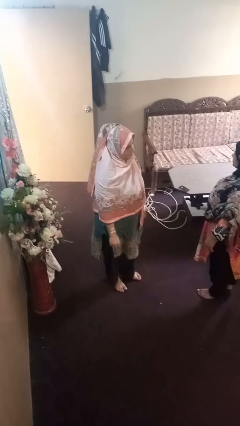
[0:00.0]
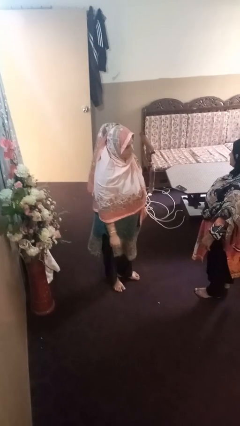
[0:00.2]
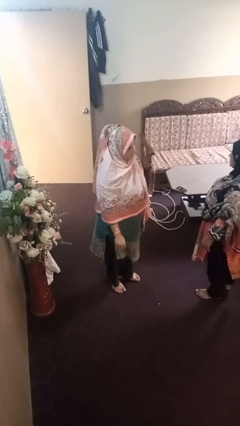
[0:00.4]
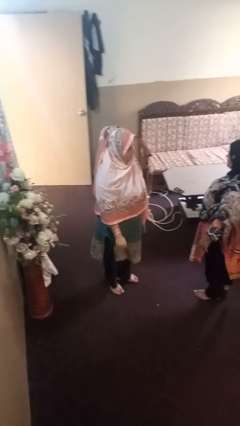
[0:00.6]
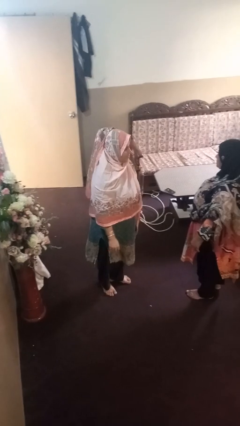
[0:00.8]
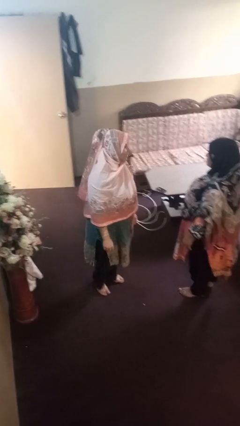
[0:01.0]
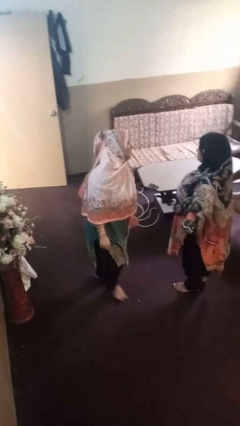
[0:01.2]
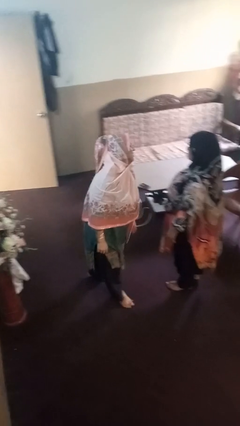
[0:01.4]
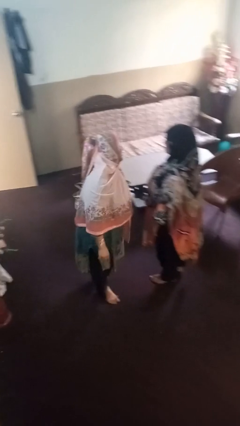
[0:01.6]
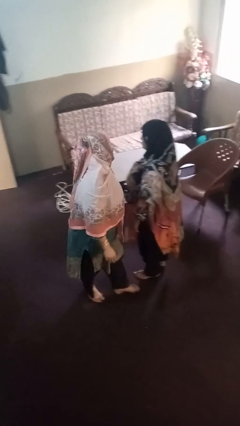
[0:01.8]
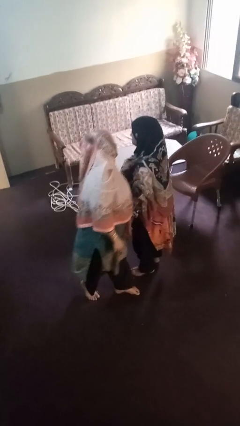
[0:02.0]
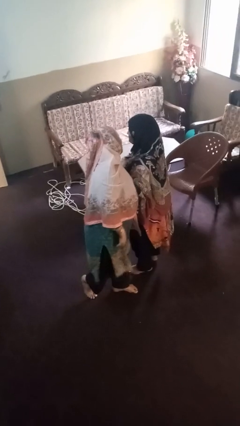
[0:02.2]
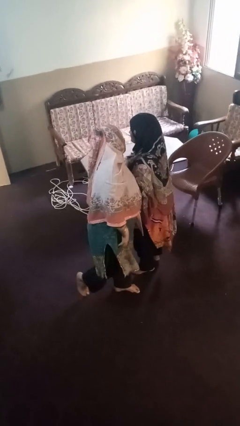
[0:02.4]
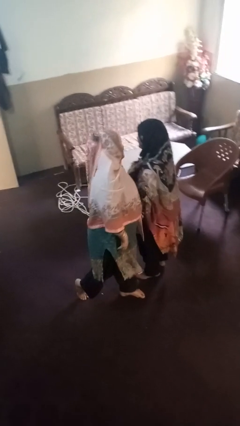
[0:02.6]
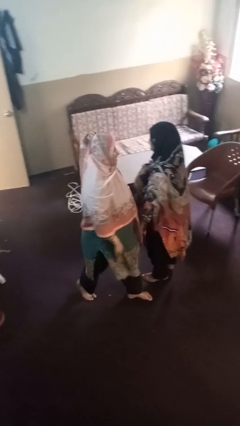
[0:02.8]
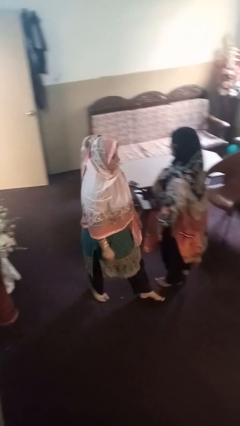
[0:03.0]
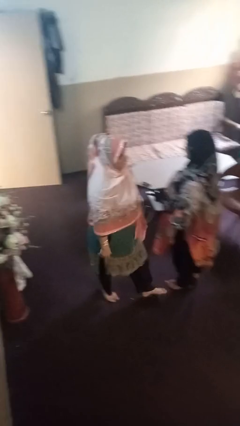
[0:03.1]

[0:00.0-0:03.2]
person laughs with person

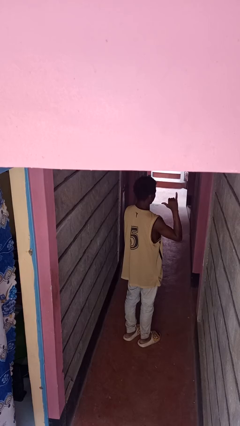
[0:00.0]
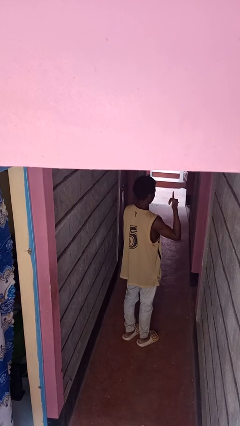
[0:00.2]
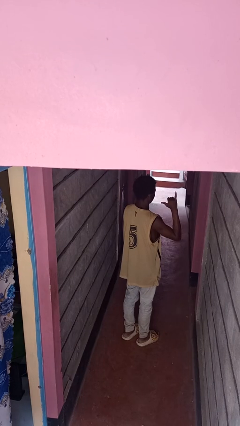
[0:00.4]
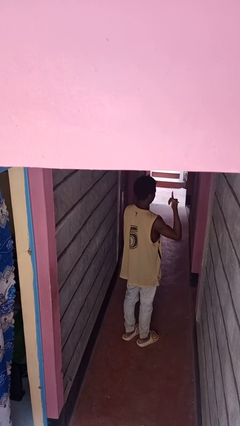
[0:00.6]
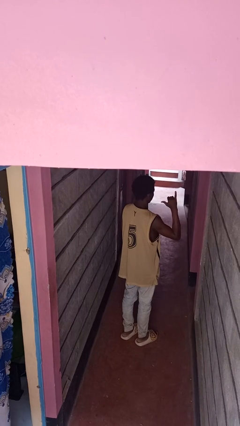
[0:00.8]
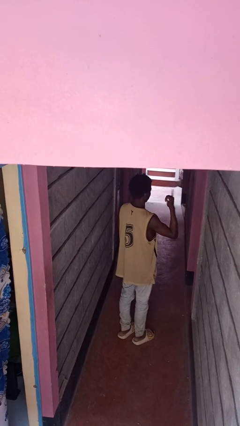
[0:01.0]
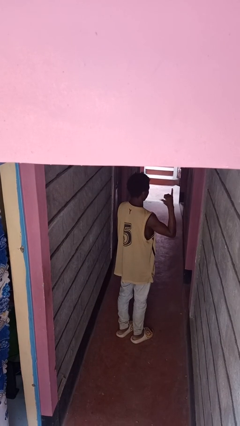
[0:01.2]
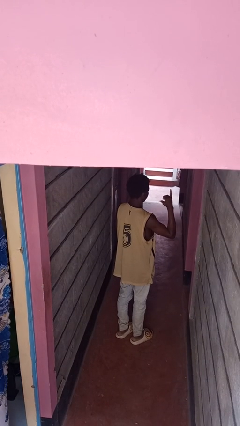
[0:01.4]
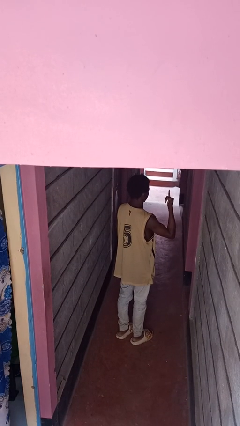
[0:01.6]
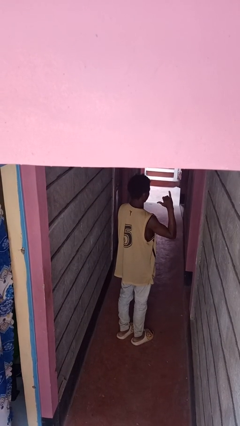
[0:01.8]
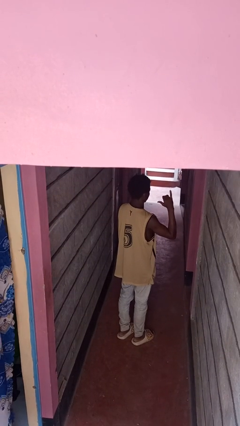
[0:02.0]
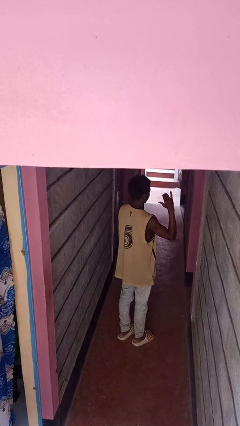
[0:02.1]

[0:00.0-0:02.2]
person gestures hang loose

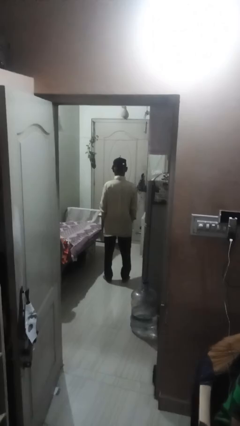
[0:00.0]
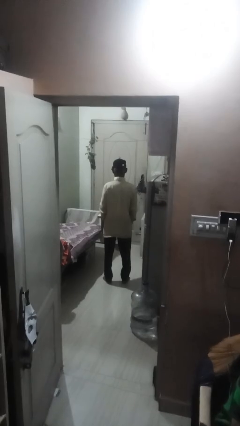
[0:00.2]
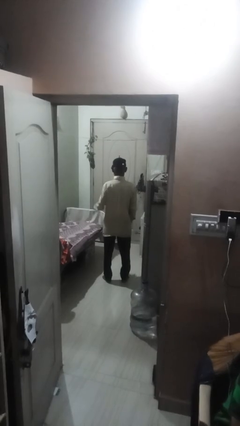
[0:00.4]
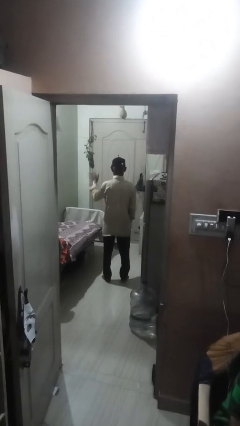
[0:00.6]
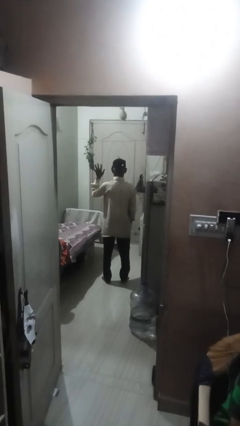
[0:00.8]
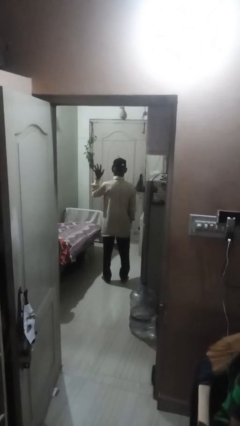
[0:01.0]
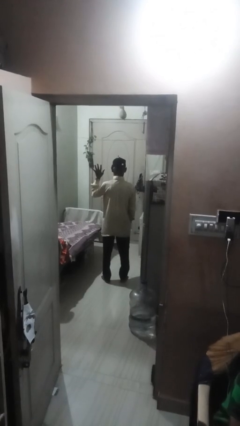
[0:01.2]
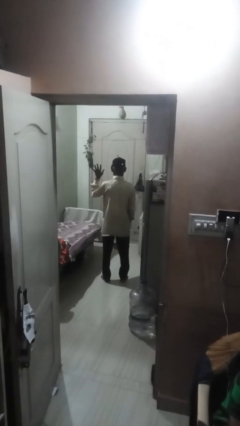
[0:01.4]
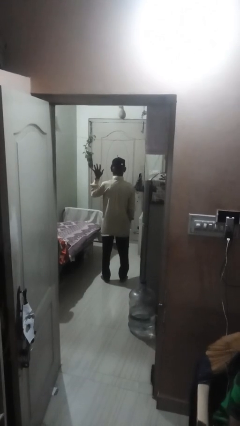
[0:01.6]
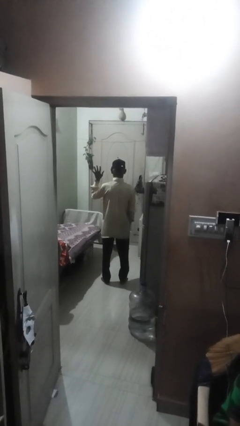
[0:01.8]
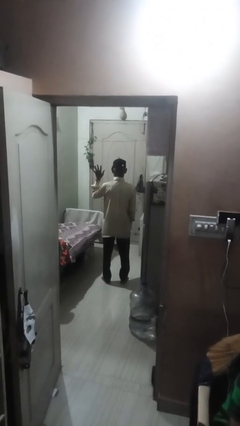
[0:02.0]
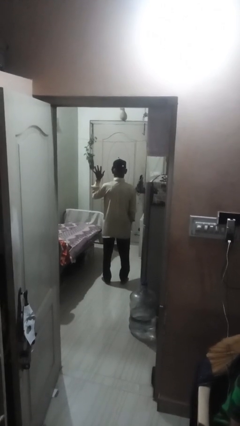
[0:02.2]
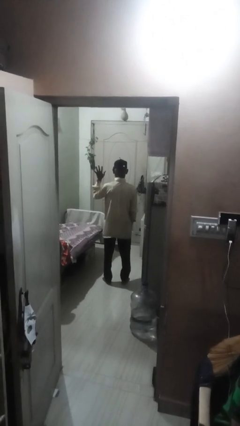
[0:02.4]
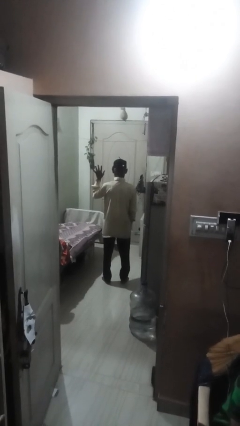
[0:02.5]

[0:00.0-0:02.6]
person gestures number five

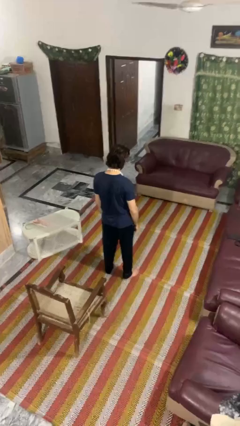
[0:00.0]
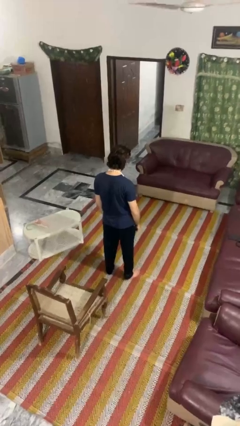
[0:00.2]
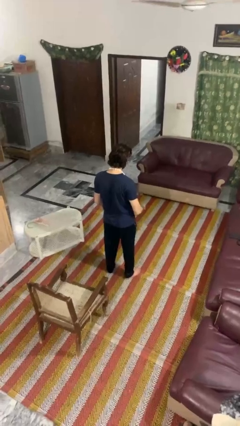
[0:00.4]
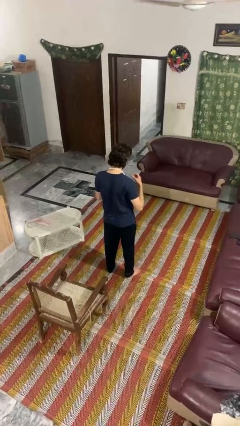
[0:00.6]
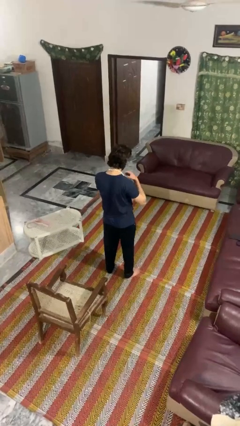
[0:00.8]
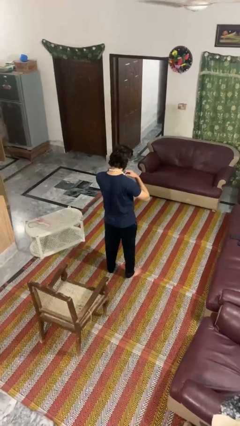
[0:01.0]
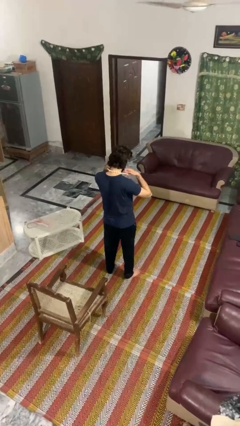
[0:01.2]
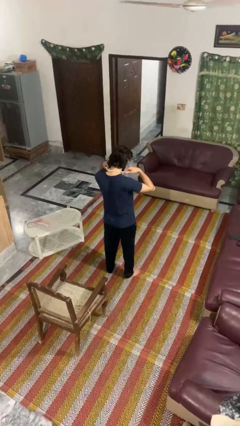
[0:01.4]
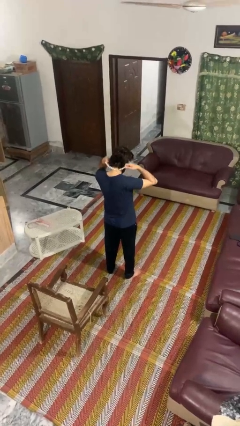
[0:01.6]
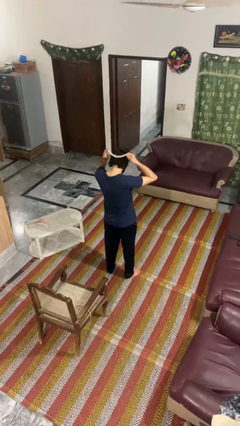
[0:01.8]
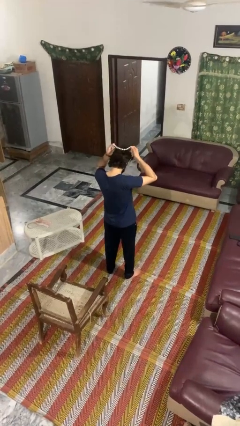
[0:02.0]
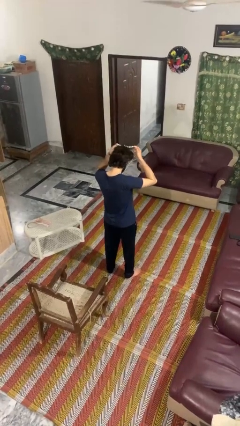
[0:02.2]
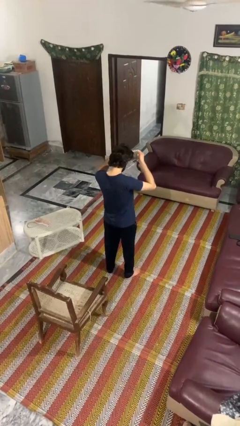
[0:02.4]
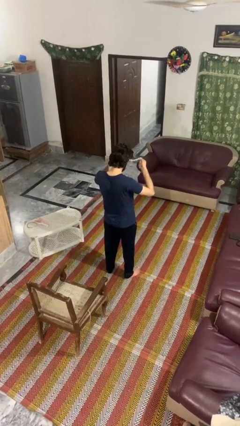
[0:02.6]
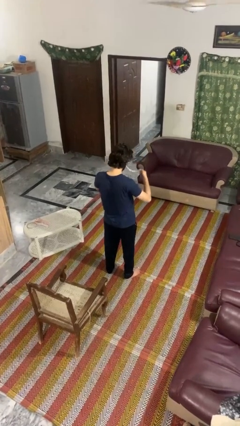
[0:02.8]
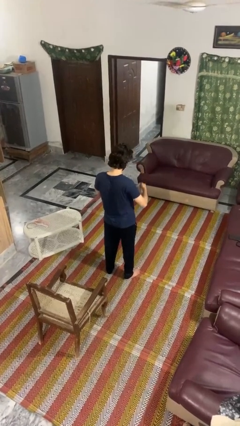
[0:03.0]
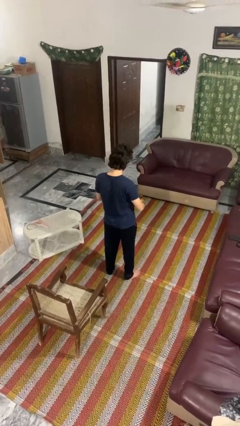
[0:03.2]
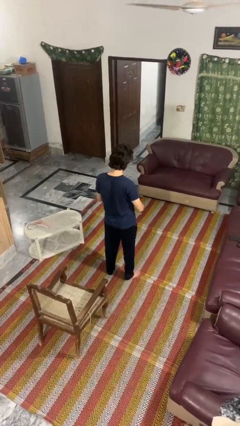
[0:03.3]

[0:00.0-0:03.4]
person takes off necklace

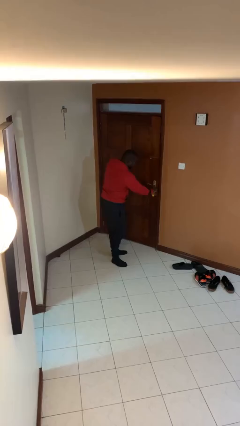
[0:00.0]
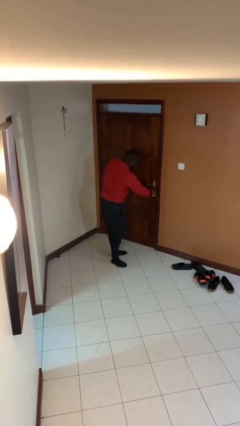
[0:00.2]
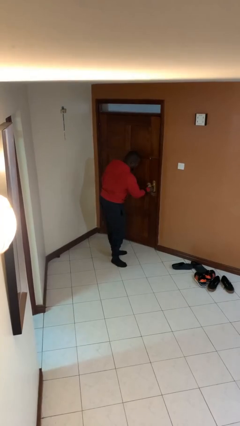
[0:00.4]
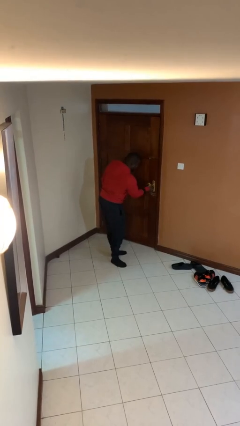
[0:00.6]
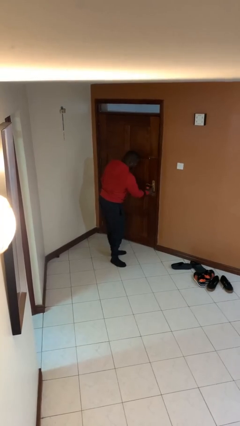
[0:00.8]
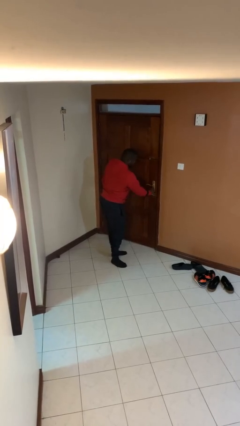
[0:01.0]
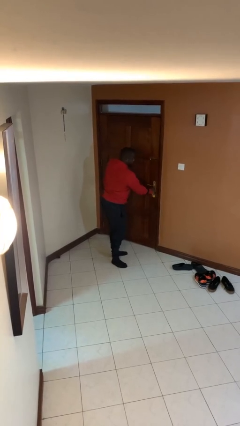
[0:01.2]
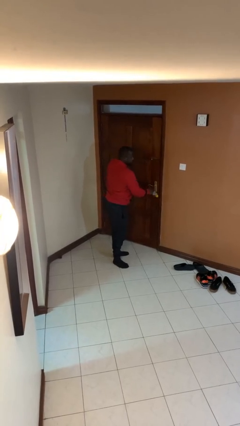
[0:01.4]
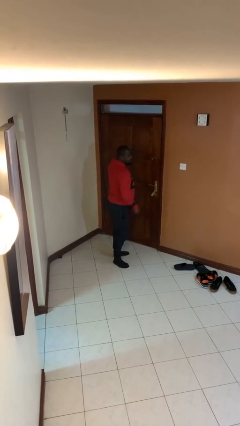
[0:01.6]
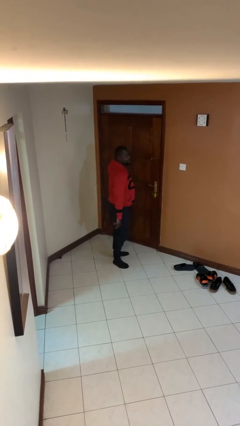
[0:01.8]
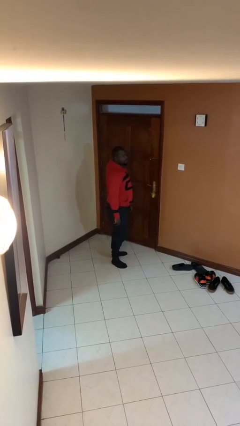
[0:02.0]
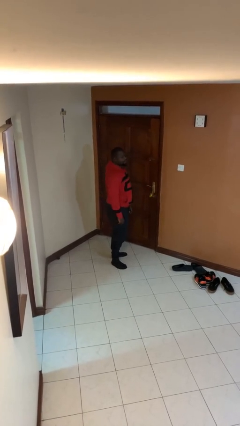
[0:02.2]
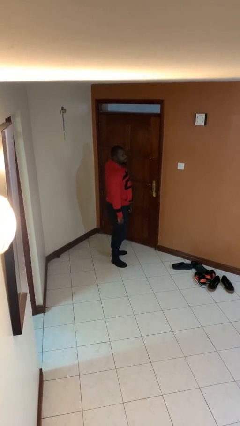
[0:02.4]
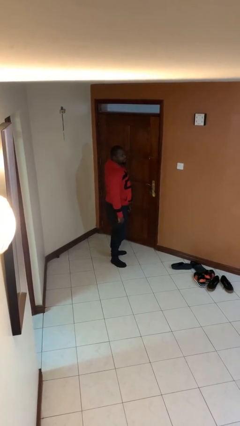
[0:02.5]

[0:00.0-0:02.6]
person locks door with keys

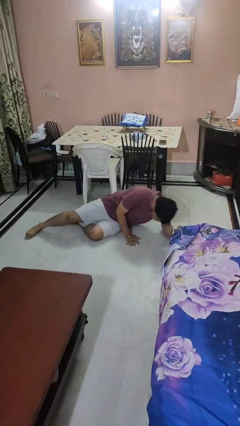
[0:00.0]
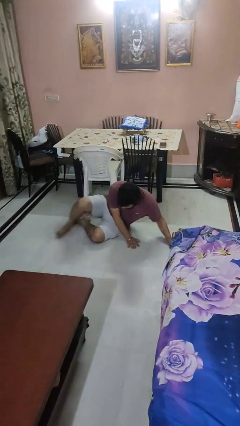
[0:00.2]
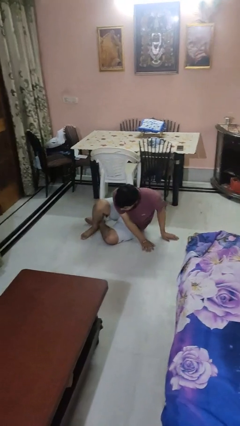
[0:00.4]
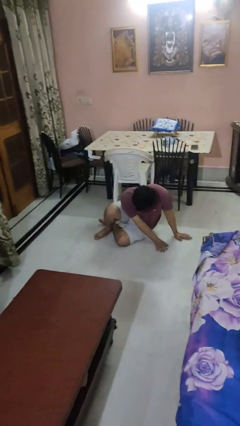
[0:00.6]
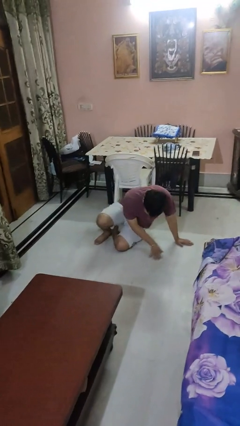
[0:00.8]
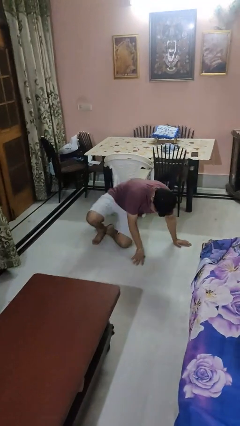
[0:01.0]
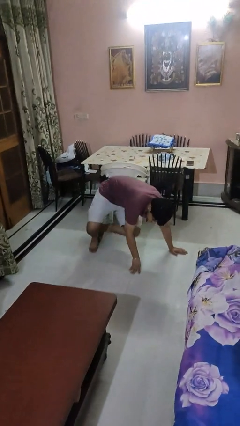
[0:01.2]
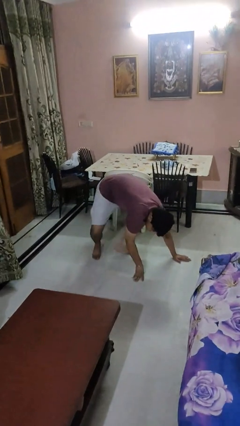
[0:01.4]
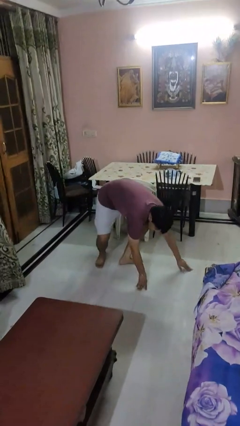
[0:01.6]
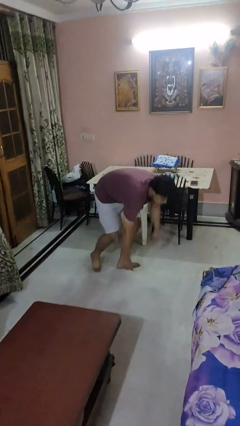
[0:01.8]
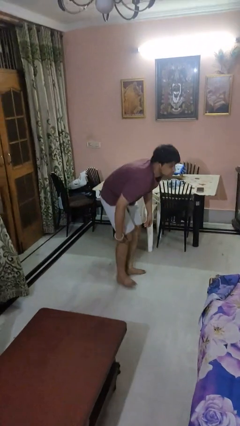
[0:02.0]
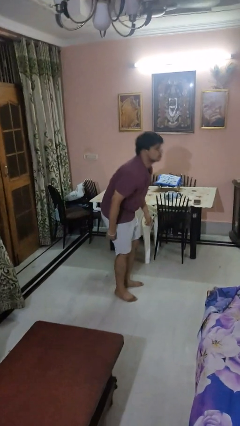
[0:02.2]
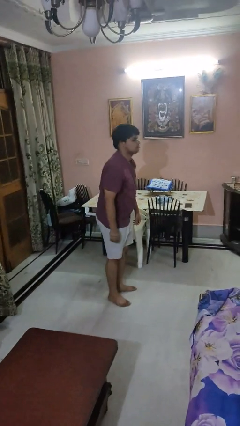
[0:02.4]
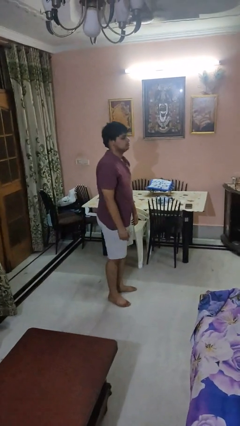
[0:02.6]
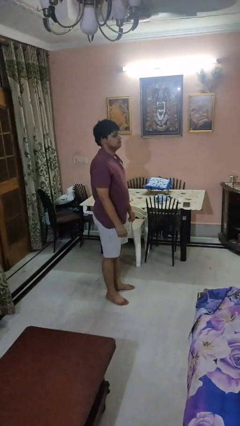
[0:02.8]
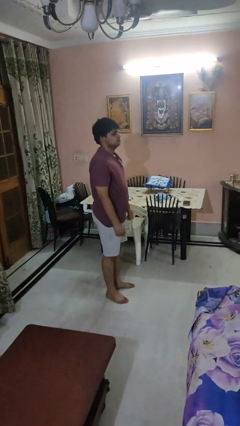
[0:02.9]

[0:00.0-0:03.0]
person stands up from floor

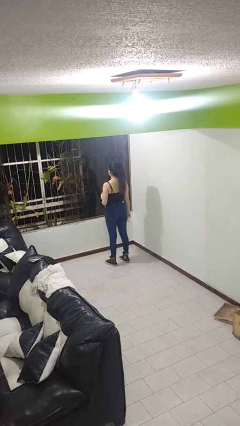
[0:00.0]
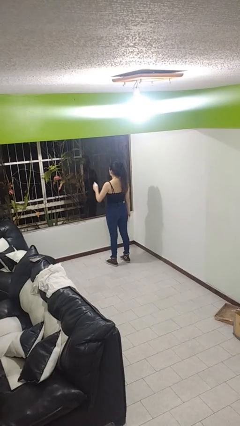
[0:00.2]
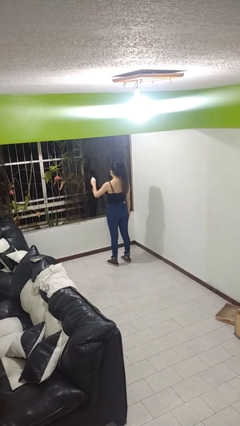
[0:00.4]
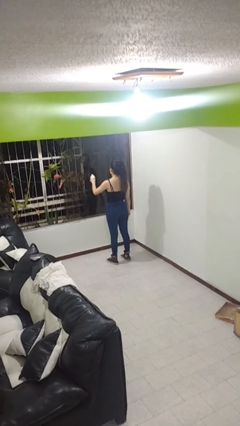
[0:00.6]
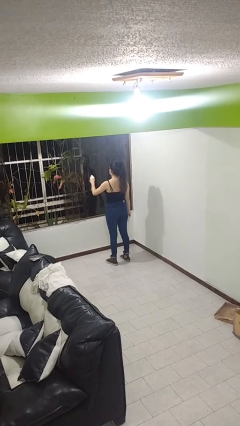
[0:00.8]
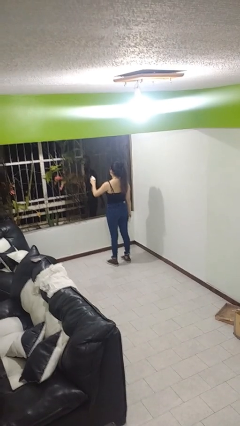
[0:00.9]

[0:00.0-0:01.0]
person sprays from bottle
